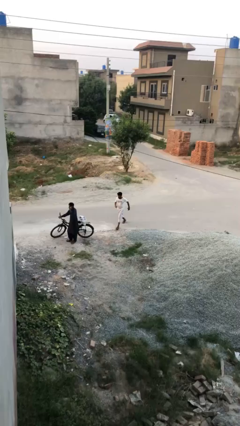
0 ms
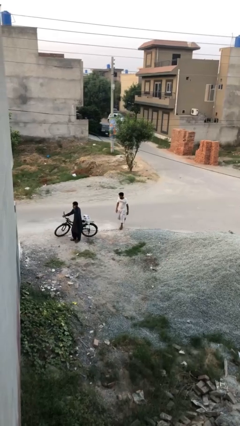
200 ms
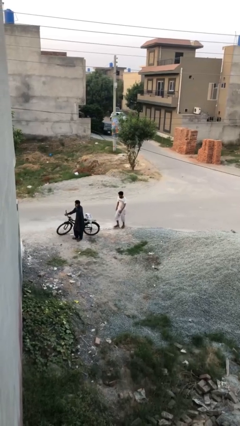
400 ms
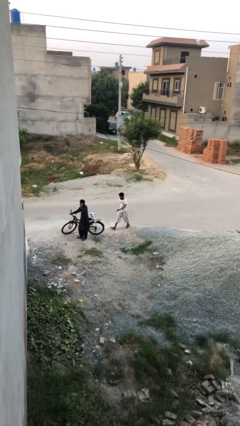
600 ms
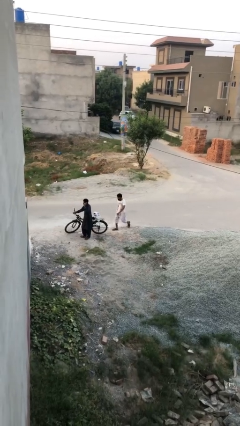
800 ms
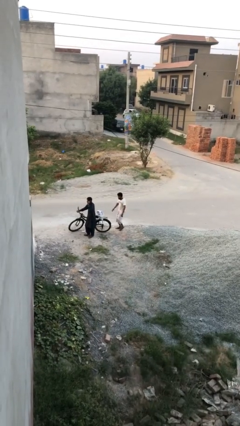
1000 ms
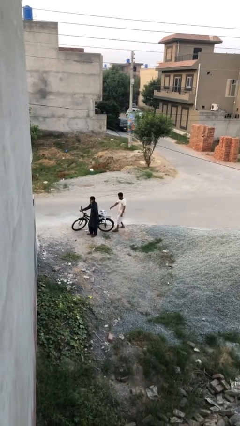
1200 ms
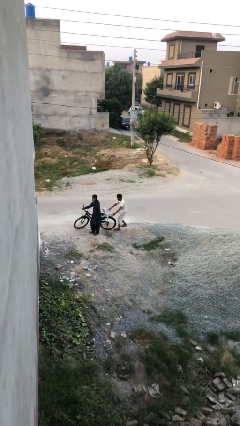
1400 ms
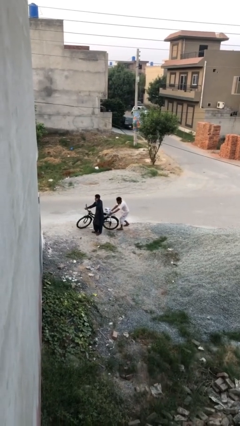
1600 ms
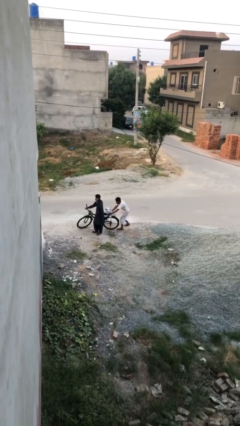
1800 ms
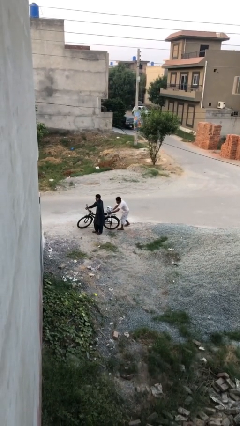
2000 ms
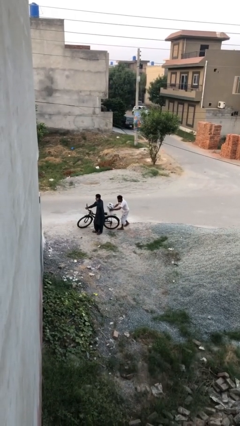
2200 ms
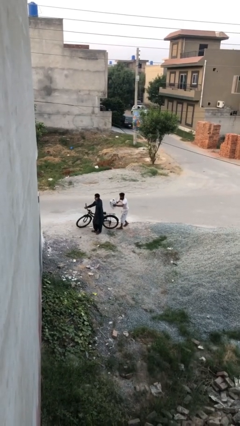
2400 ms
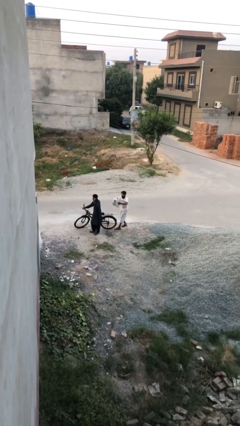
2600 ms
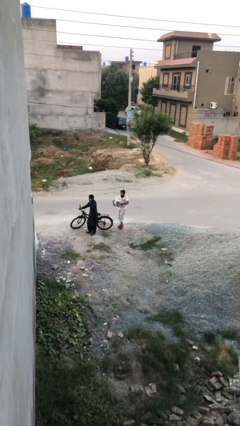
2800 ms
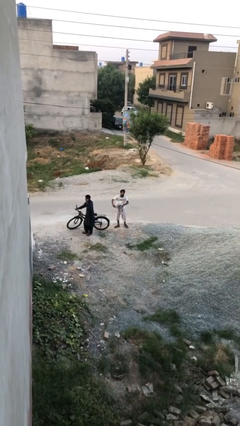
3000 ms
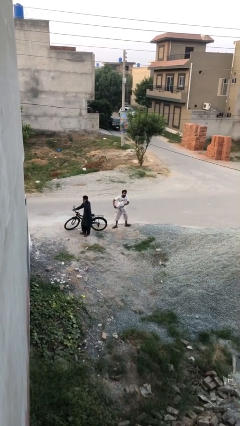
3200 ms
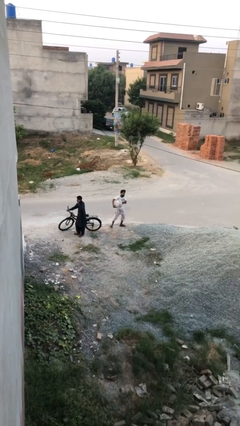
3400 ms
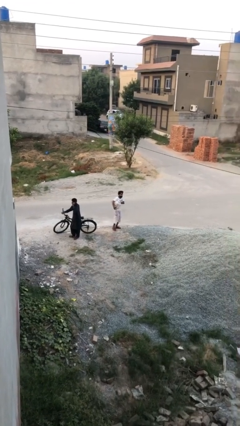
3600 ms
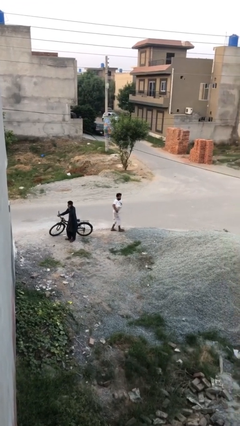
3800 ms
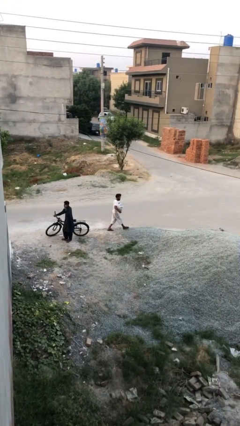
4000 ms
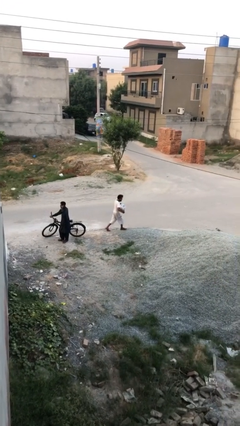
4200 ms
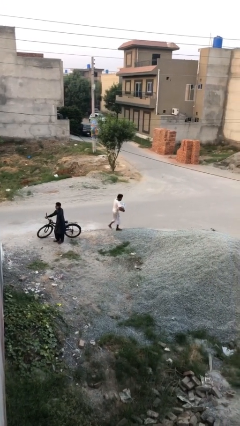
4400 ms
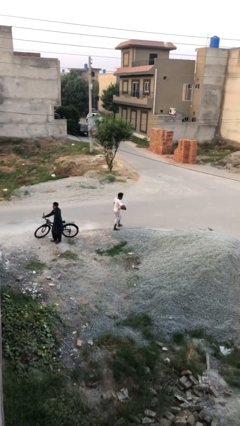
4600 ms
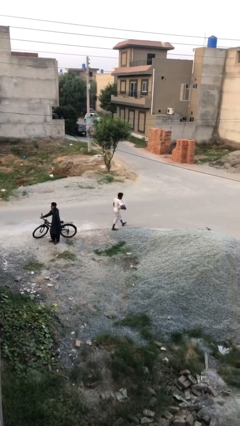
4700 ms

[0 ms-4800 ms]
person steals object from person

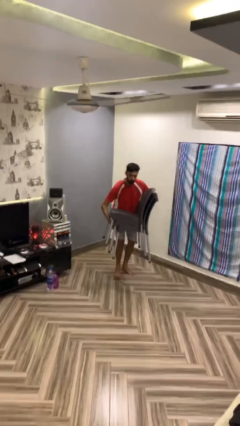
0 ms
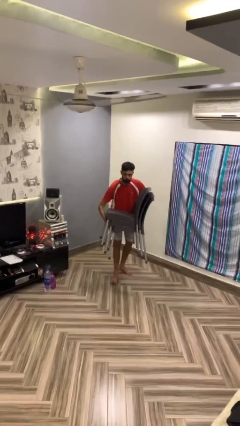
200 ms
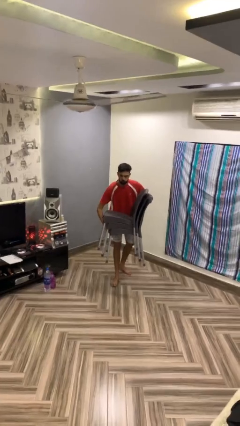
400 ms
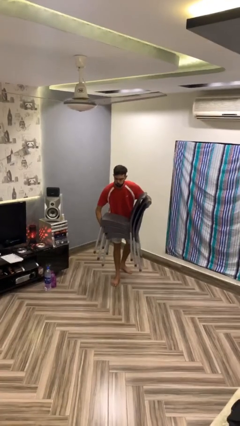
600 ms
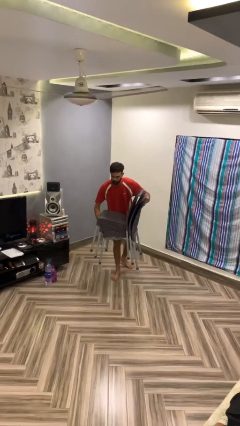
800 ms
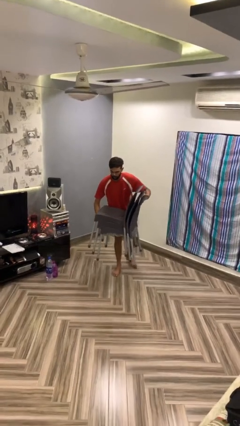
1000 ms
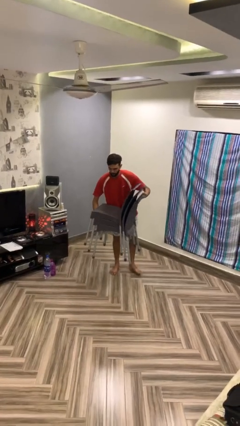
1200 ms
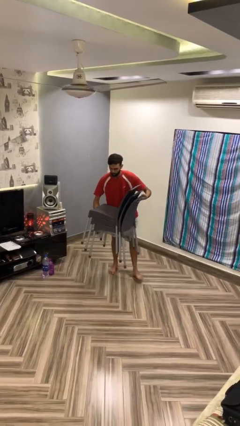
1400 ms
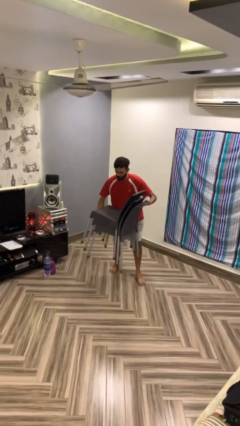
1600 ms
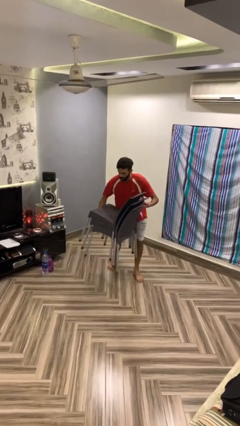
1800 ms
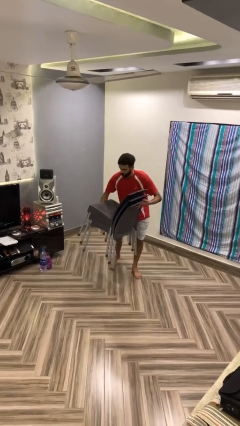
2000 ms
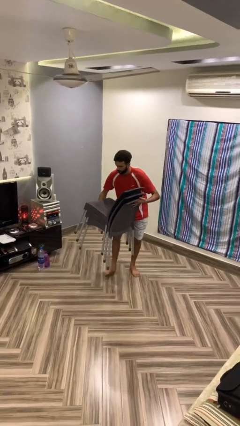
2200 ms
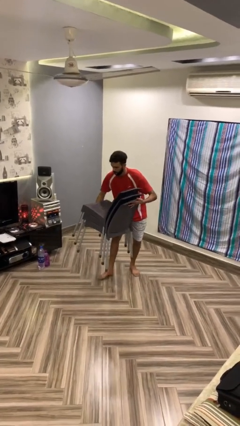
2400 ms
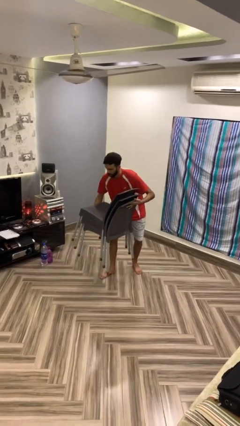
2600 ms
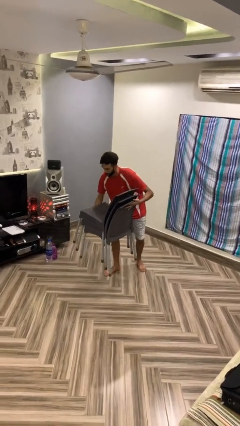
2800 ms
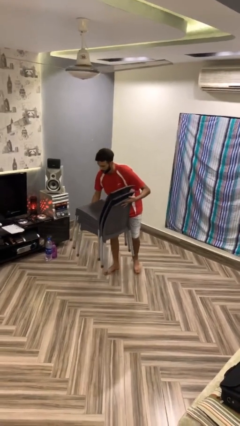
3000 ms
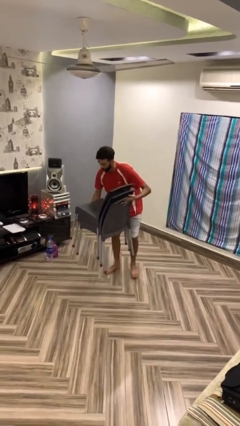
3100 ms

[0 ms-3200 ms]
person carries heavy object

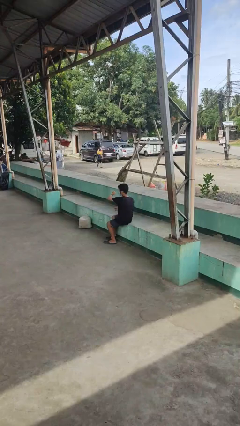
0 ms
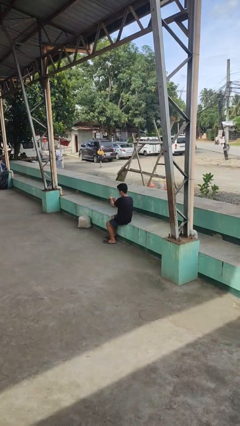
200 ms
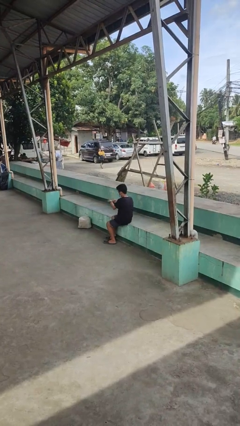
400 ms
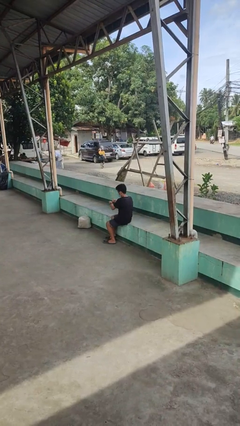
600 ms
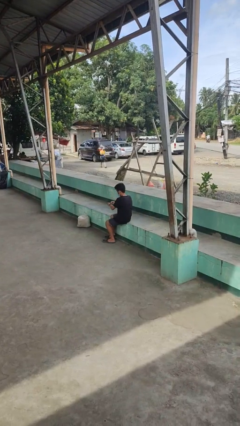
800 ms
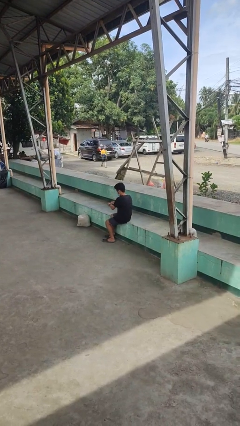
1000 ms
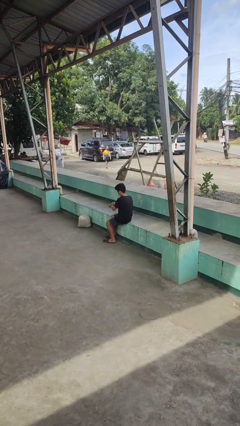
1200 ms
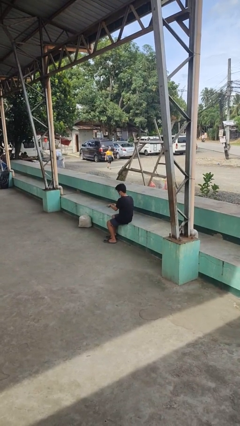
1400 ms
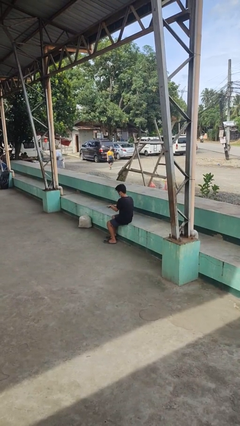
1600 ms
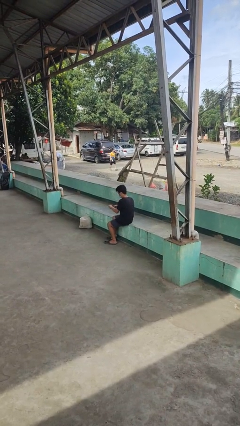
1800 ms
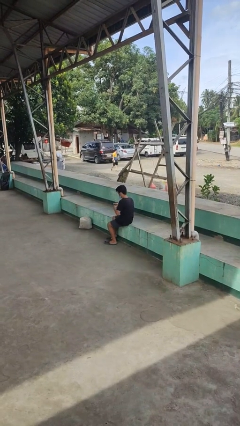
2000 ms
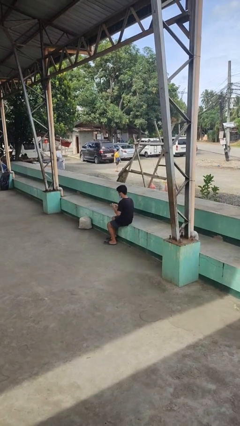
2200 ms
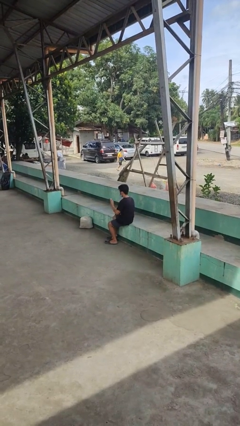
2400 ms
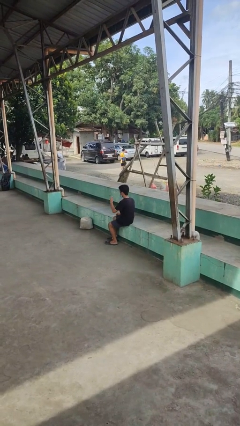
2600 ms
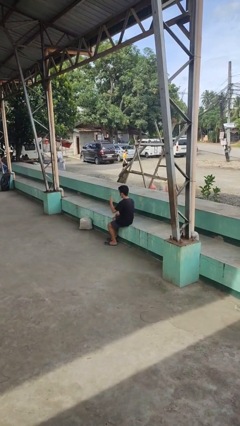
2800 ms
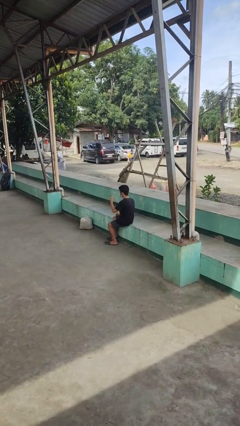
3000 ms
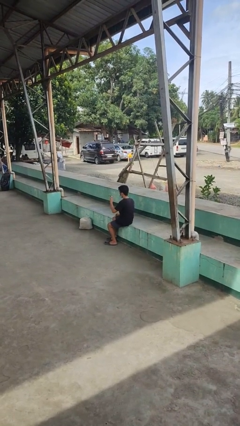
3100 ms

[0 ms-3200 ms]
person takes off wristwatch

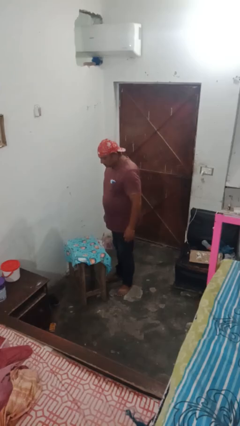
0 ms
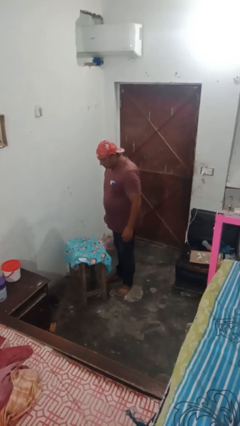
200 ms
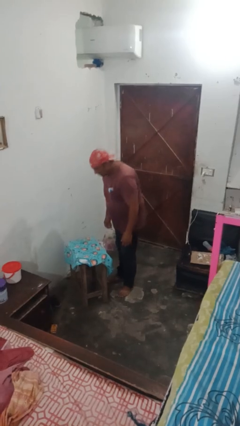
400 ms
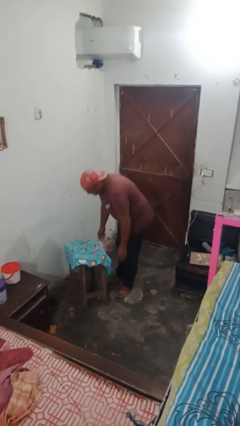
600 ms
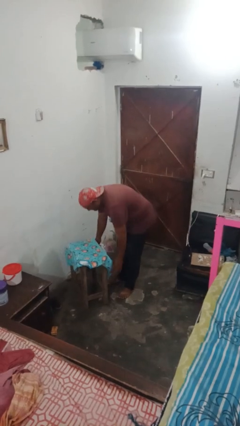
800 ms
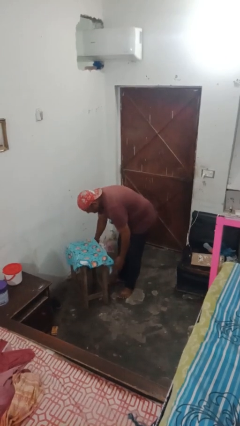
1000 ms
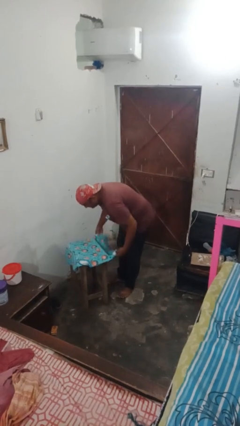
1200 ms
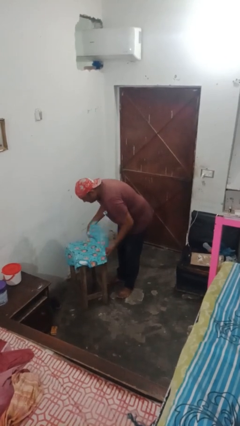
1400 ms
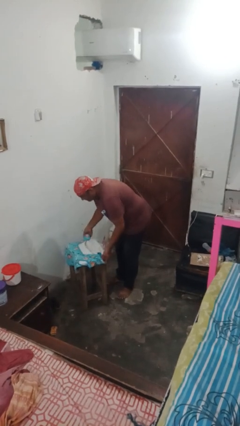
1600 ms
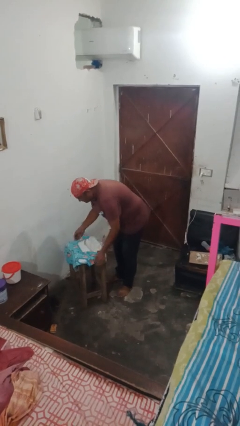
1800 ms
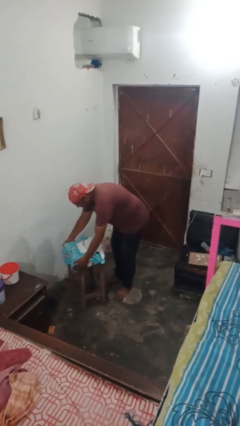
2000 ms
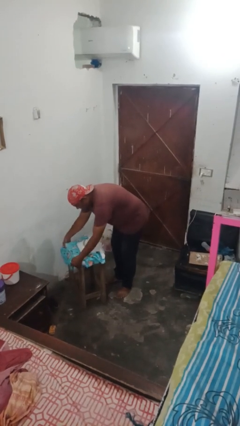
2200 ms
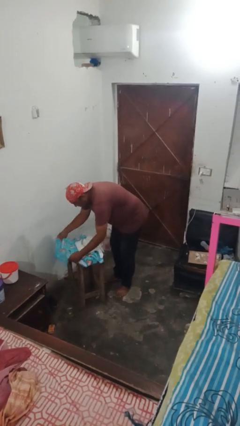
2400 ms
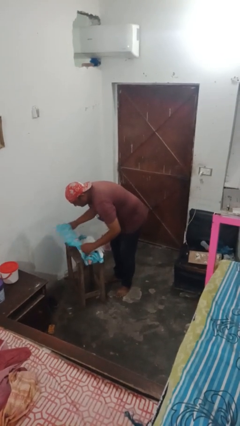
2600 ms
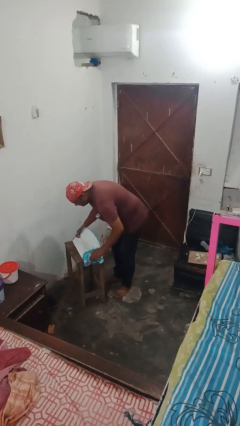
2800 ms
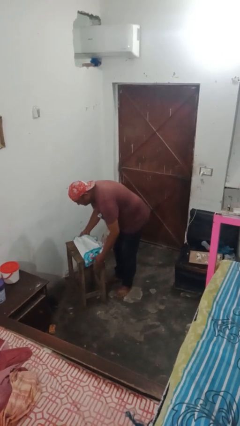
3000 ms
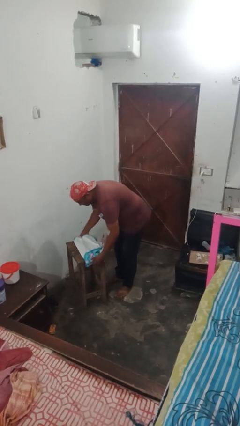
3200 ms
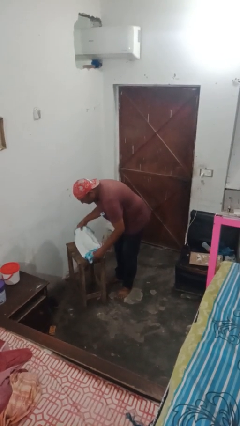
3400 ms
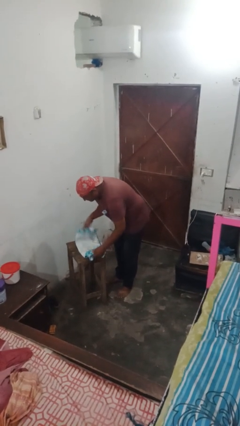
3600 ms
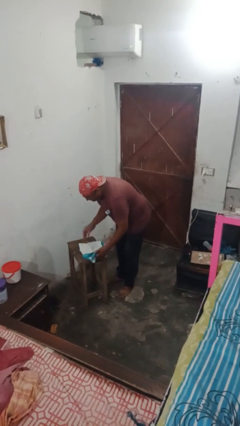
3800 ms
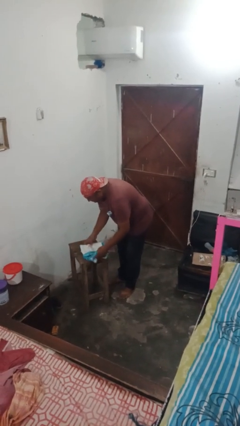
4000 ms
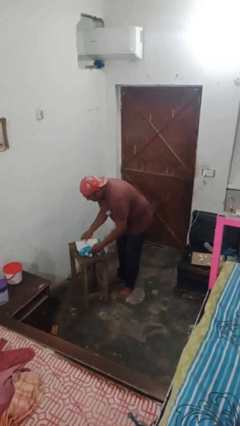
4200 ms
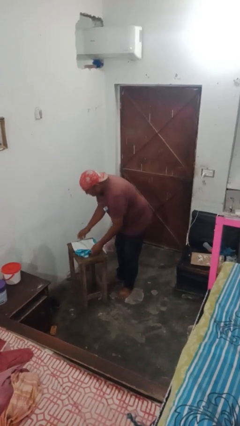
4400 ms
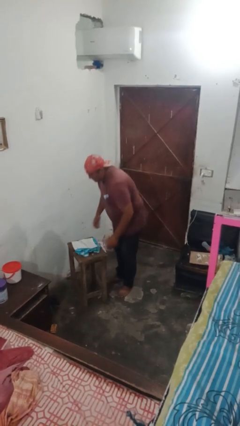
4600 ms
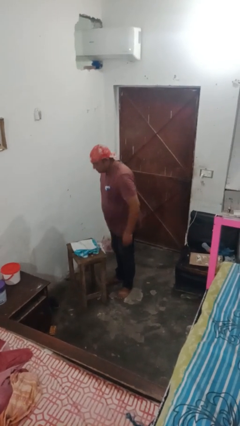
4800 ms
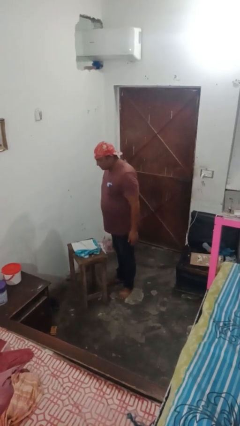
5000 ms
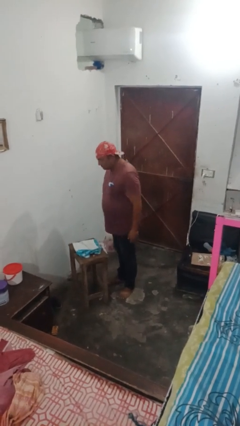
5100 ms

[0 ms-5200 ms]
person spreads tablecloth

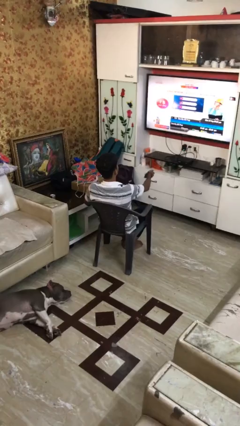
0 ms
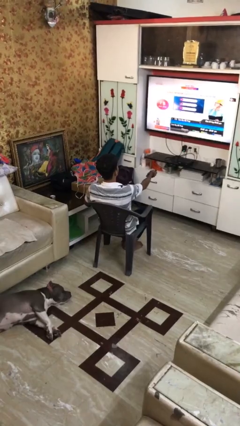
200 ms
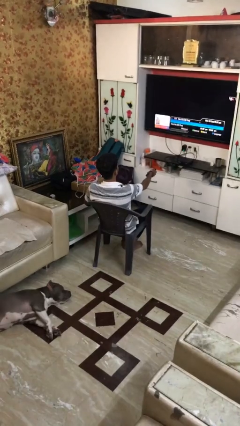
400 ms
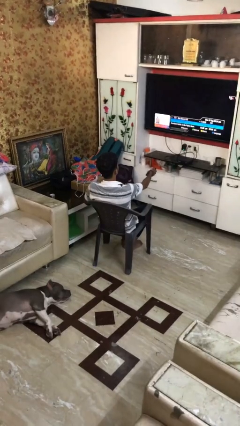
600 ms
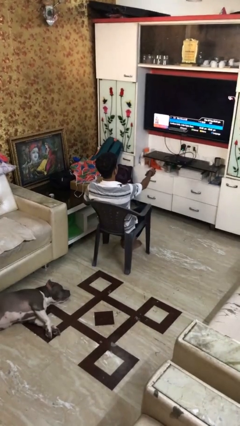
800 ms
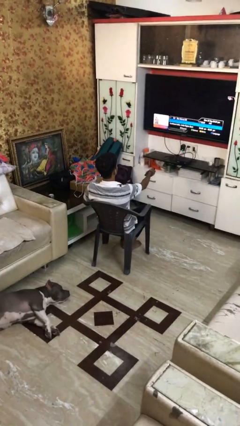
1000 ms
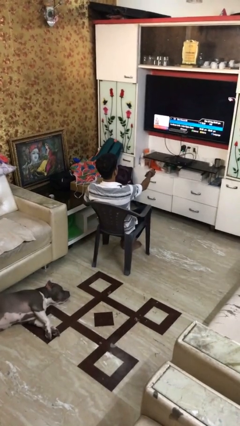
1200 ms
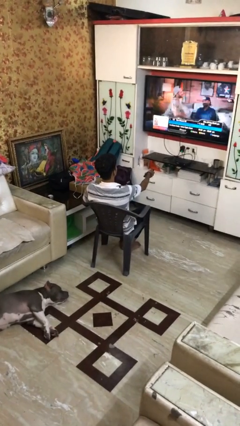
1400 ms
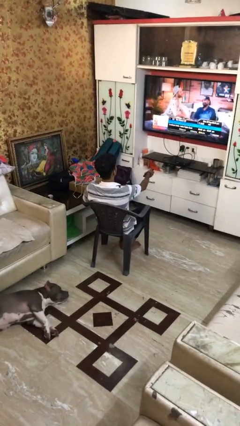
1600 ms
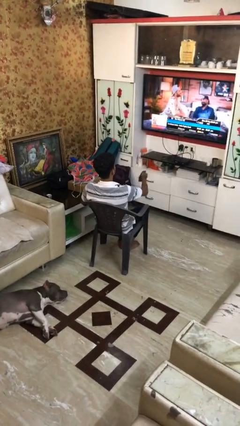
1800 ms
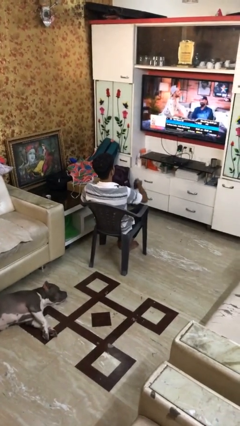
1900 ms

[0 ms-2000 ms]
person uses television remote
